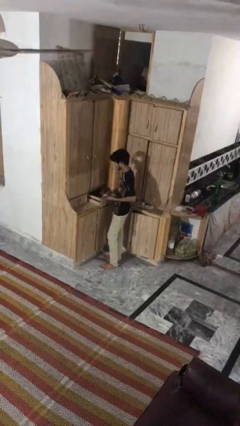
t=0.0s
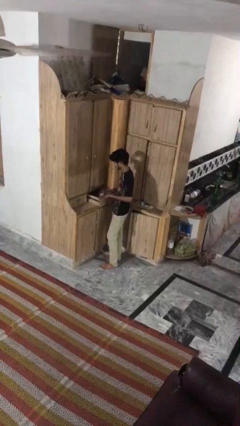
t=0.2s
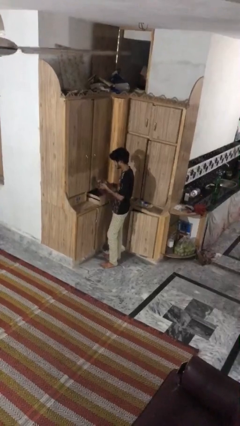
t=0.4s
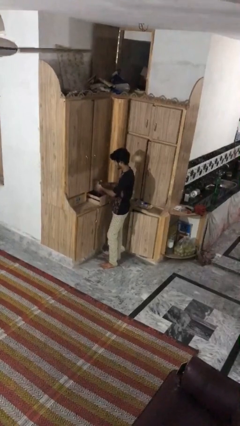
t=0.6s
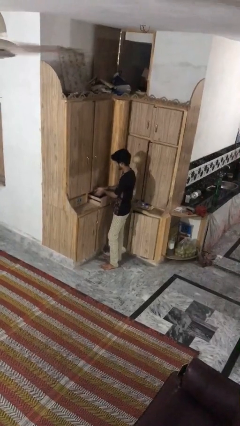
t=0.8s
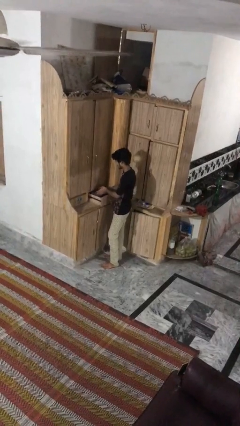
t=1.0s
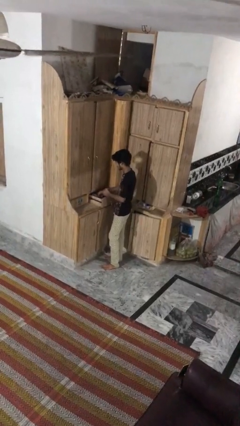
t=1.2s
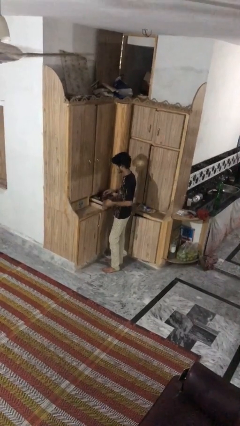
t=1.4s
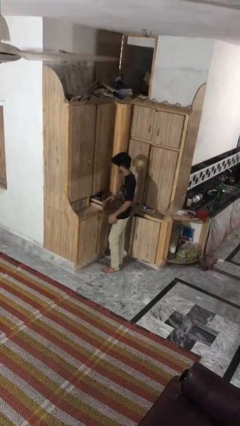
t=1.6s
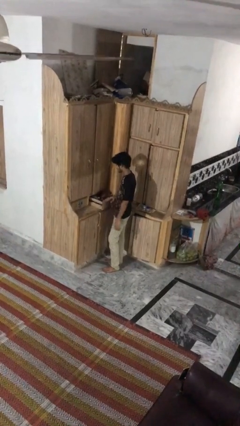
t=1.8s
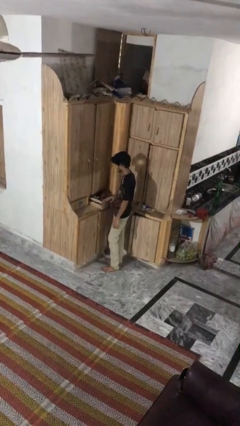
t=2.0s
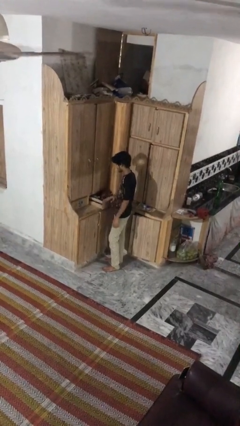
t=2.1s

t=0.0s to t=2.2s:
person puts clothes into dresser

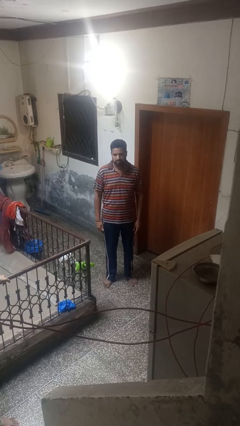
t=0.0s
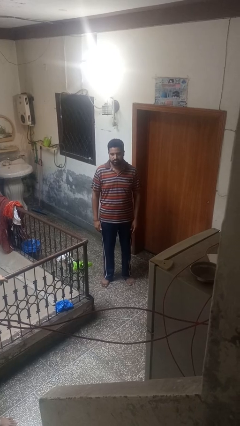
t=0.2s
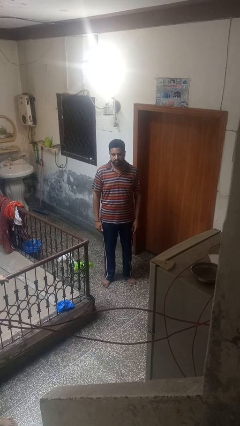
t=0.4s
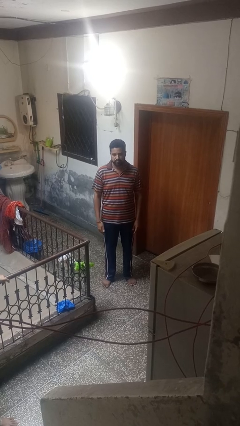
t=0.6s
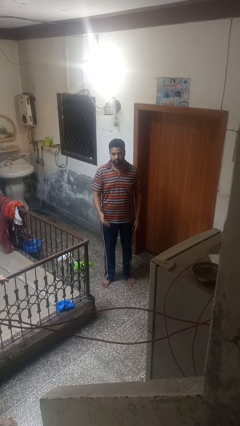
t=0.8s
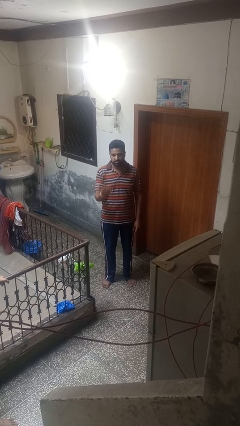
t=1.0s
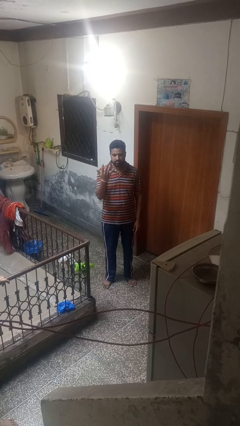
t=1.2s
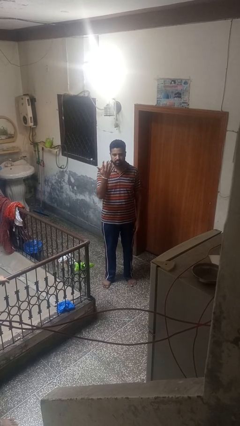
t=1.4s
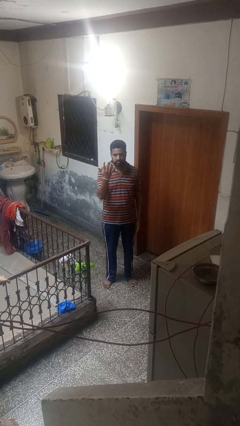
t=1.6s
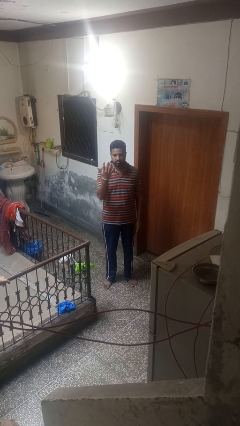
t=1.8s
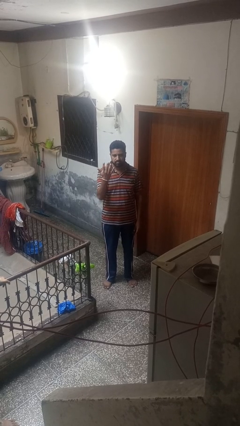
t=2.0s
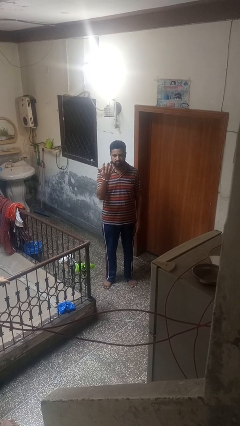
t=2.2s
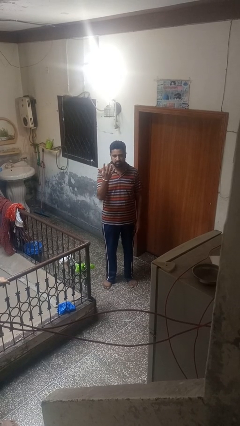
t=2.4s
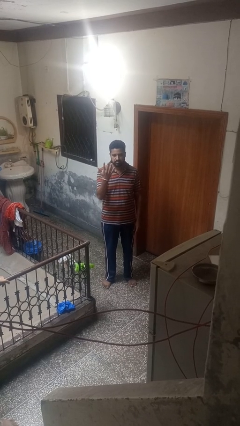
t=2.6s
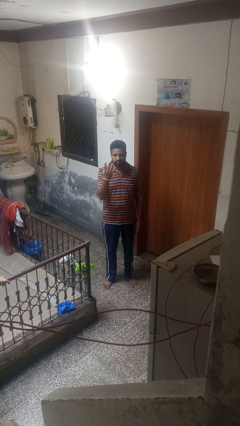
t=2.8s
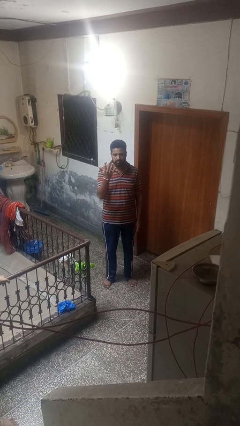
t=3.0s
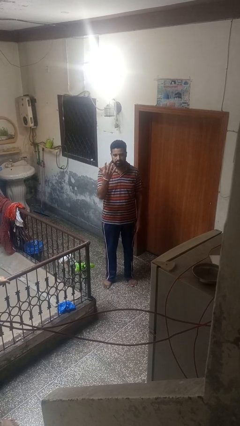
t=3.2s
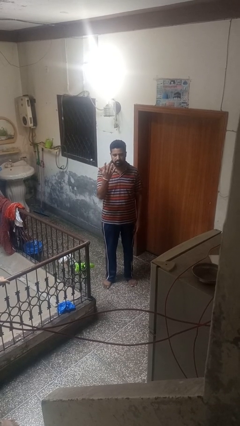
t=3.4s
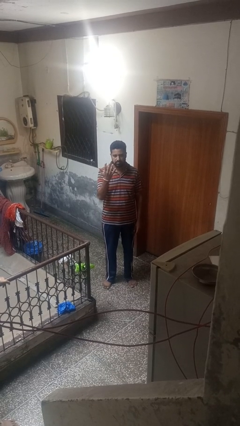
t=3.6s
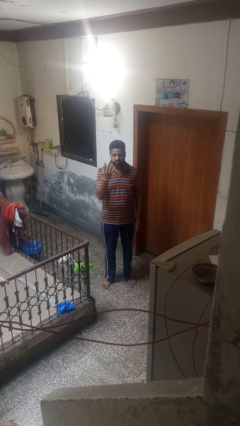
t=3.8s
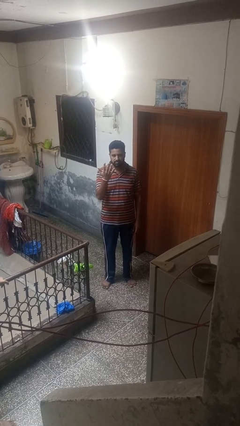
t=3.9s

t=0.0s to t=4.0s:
person gestures number five

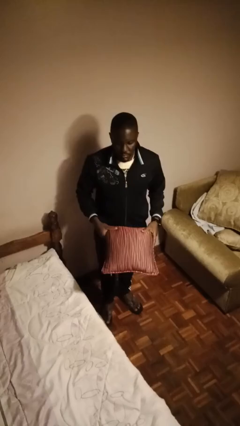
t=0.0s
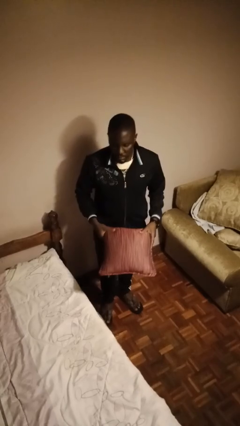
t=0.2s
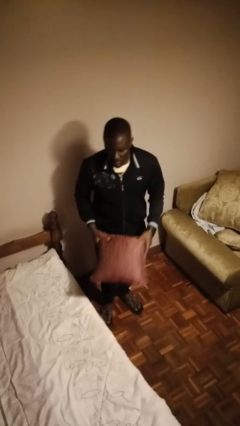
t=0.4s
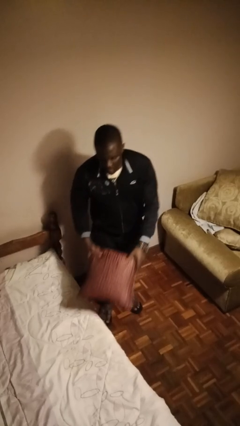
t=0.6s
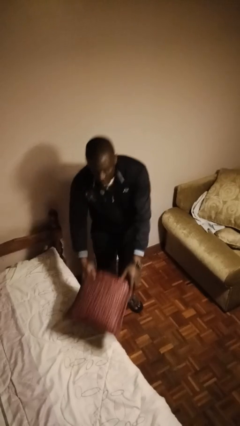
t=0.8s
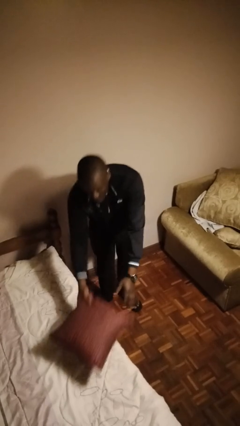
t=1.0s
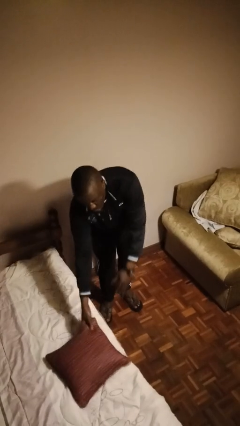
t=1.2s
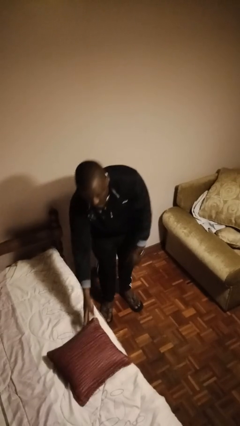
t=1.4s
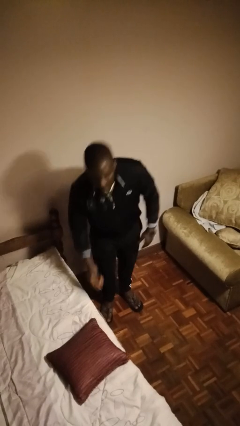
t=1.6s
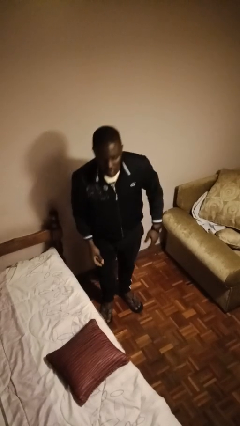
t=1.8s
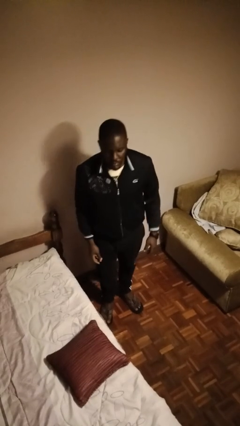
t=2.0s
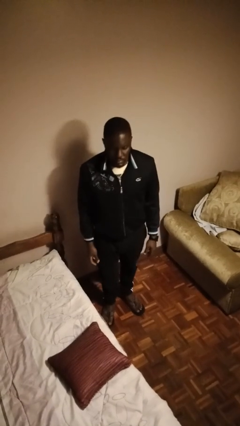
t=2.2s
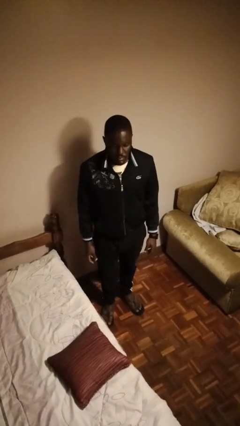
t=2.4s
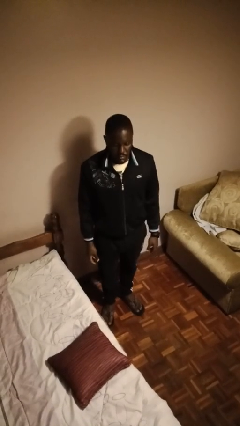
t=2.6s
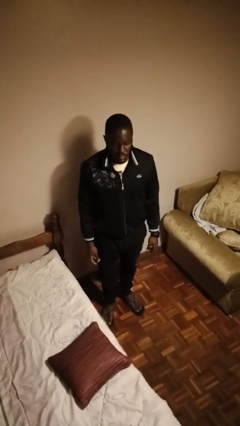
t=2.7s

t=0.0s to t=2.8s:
person puts down object on bed

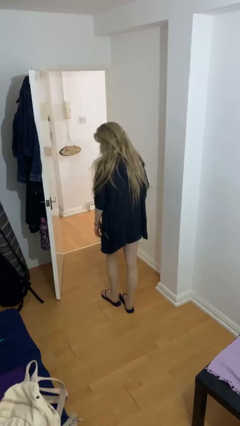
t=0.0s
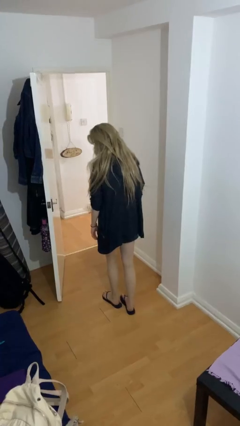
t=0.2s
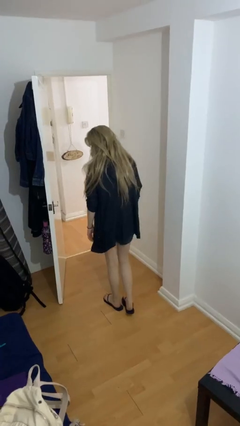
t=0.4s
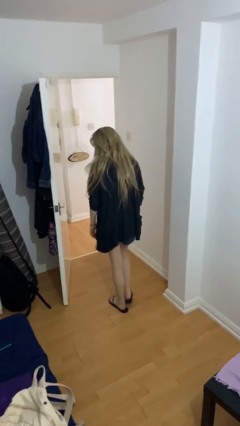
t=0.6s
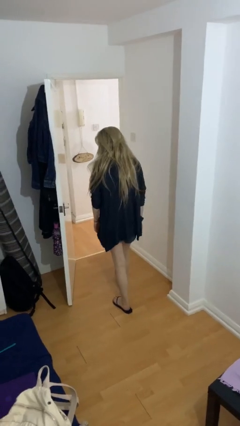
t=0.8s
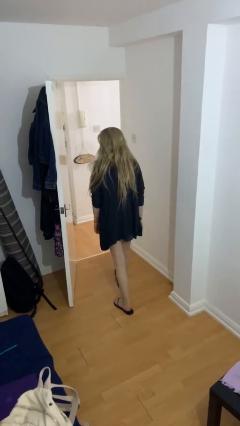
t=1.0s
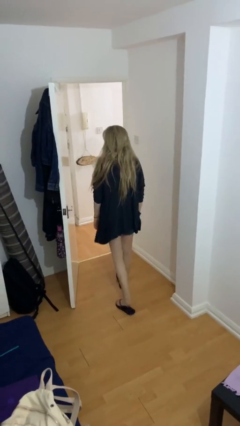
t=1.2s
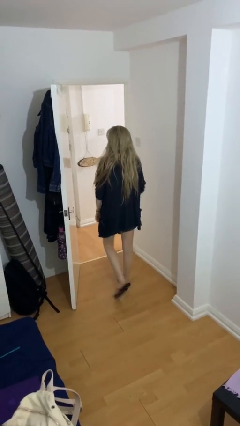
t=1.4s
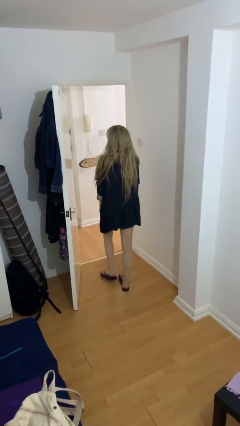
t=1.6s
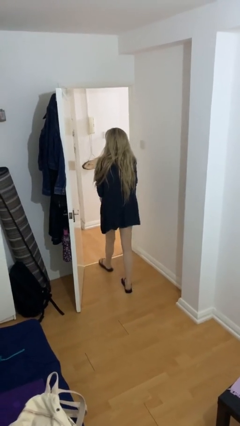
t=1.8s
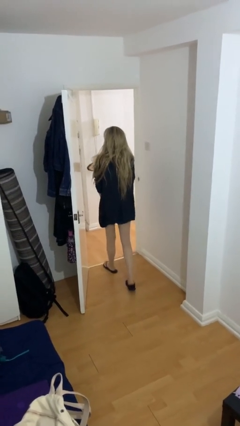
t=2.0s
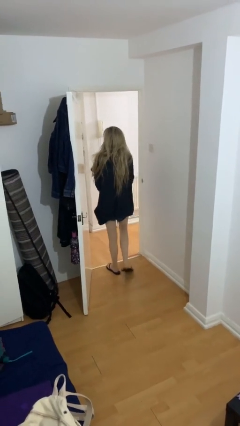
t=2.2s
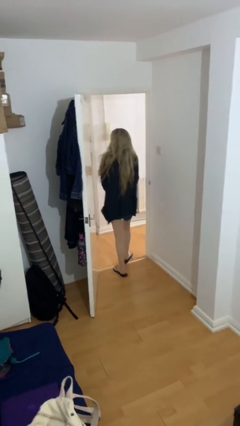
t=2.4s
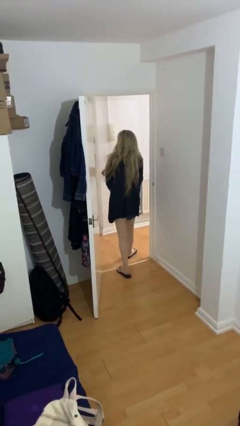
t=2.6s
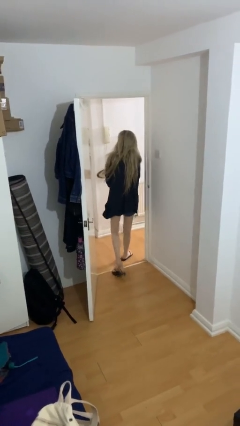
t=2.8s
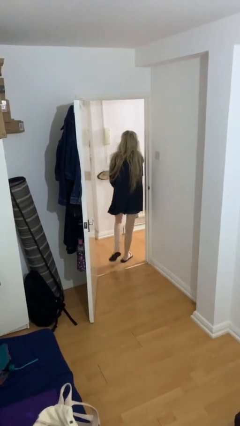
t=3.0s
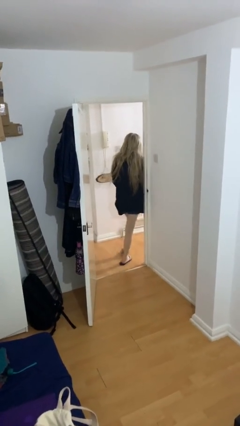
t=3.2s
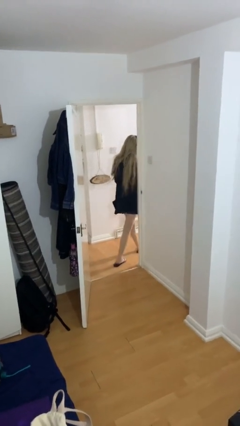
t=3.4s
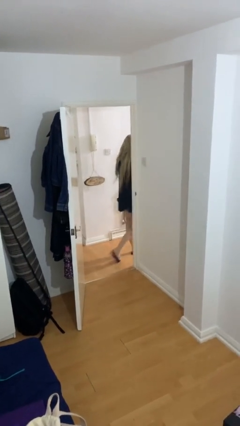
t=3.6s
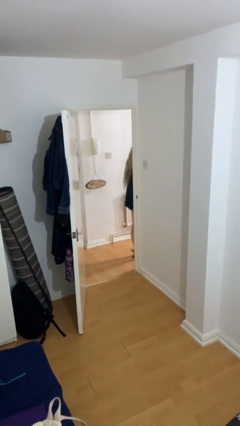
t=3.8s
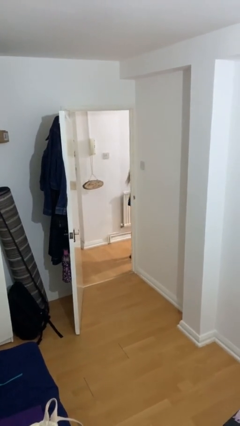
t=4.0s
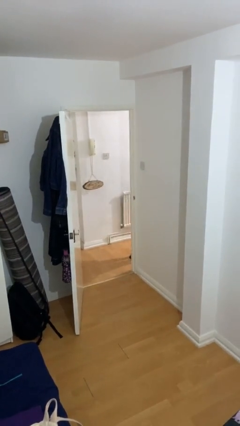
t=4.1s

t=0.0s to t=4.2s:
person exits scene through structure

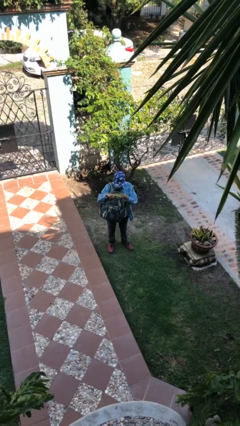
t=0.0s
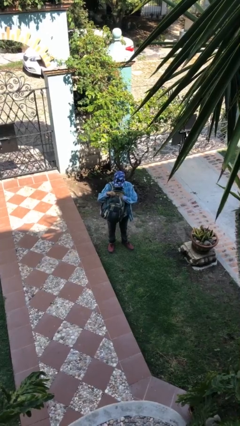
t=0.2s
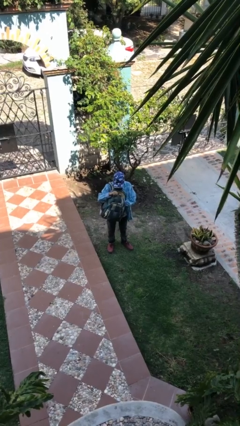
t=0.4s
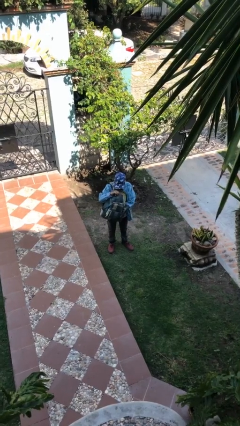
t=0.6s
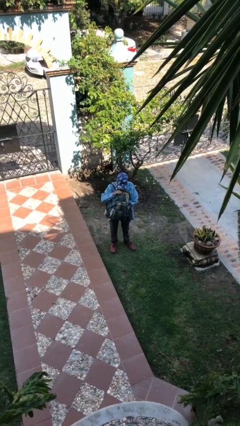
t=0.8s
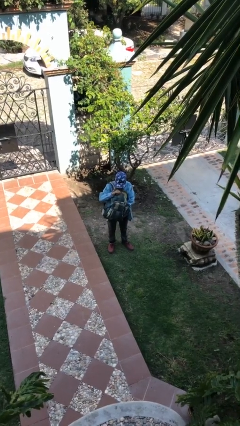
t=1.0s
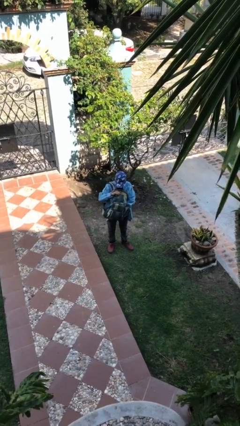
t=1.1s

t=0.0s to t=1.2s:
person searches in backpack

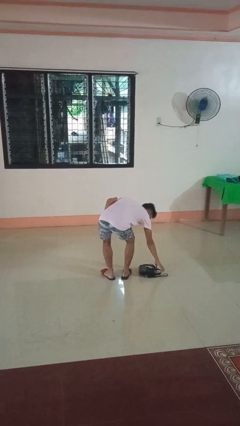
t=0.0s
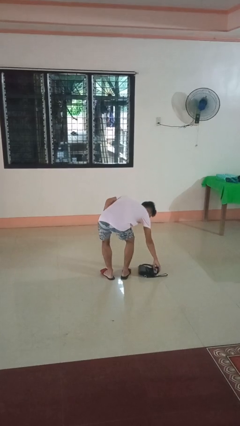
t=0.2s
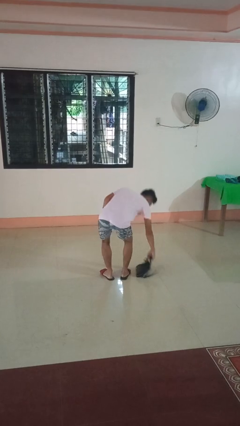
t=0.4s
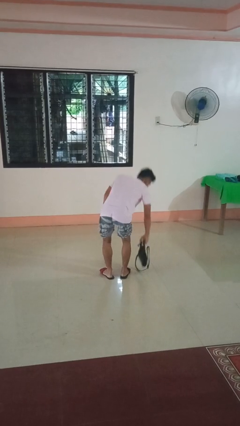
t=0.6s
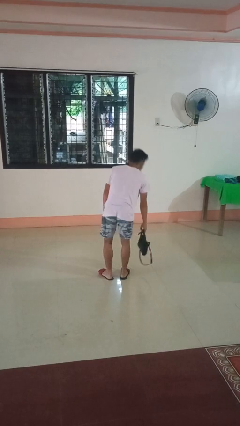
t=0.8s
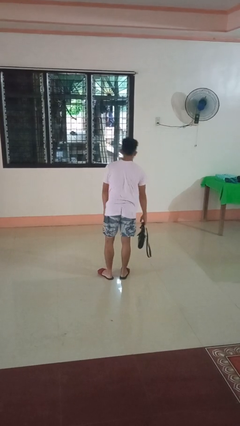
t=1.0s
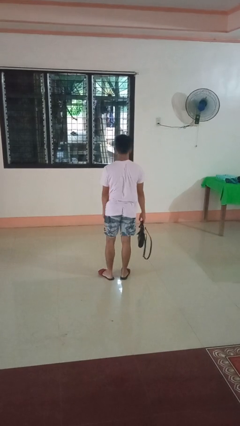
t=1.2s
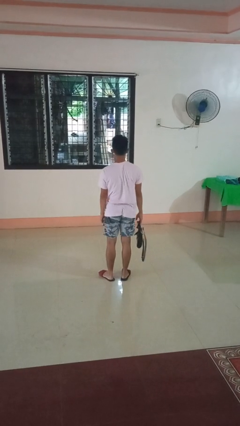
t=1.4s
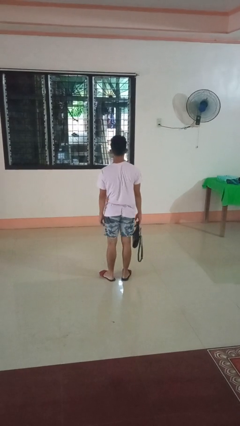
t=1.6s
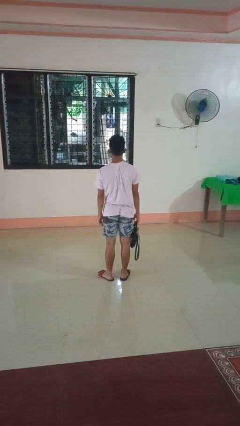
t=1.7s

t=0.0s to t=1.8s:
person picks up object from floor

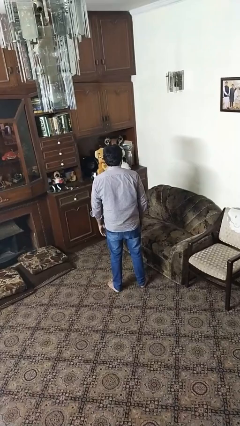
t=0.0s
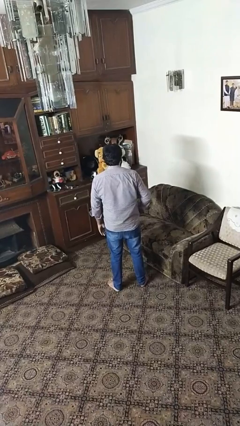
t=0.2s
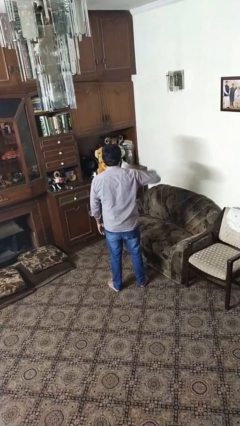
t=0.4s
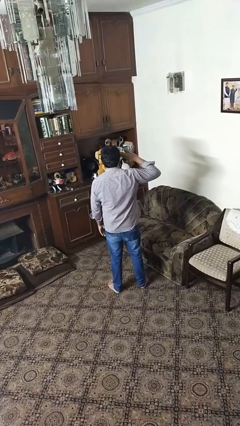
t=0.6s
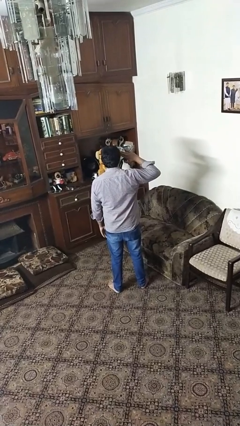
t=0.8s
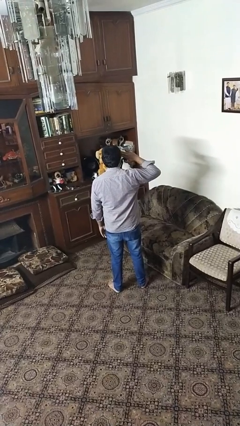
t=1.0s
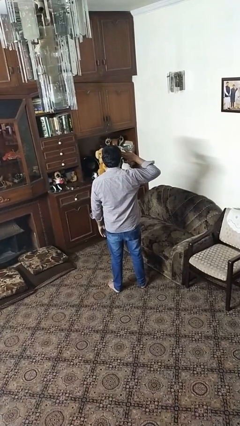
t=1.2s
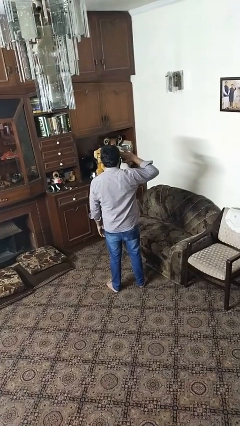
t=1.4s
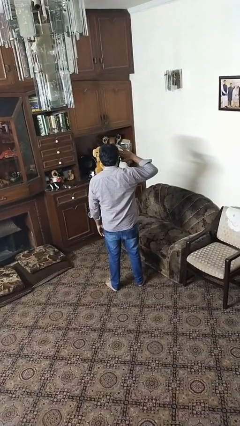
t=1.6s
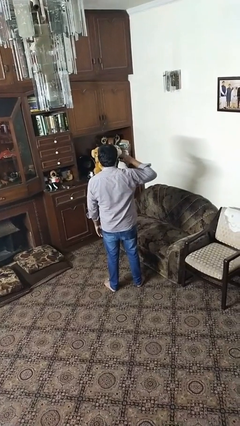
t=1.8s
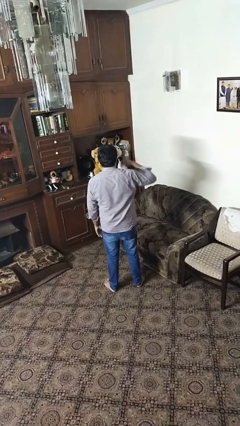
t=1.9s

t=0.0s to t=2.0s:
person salutes
